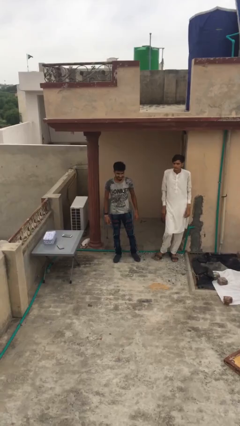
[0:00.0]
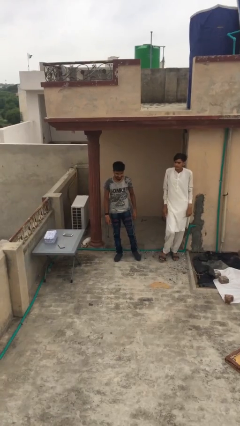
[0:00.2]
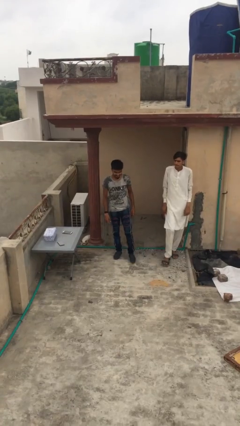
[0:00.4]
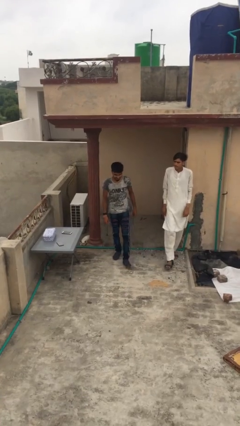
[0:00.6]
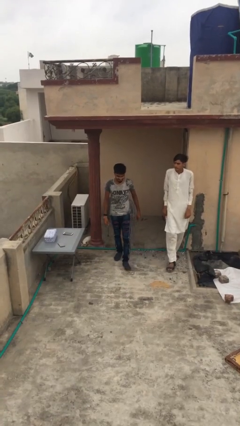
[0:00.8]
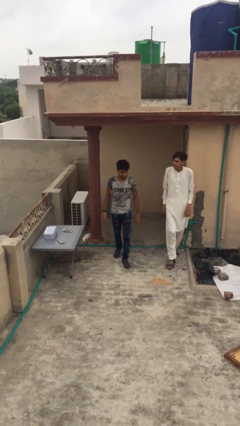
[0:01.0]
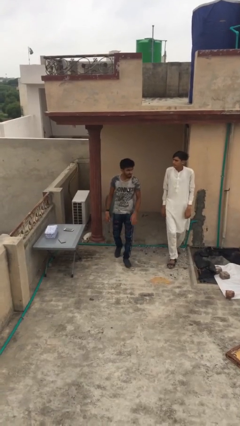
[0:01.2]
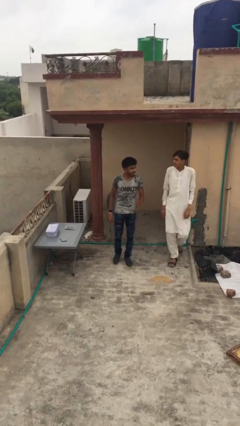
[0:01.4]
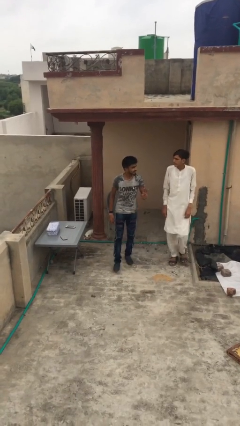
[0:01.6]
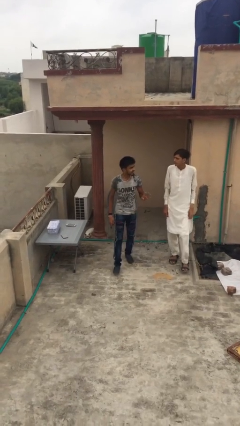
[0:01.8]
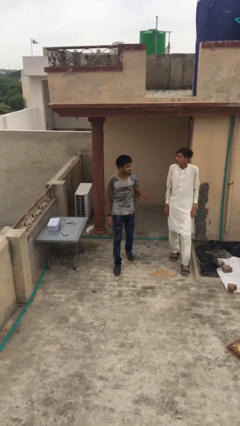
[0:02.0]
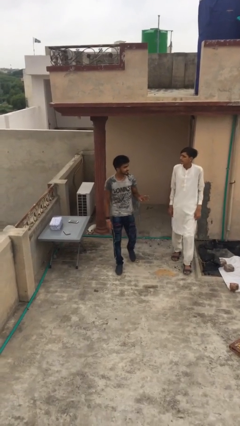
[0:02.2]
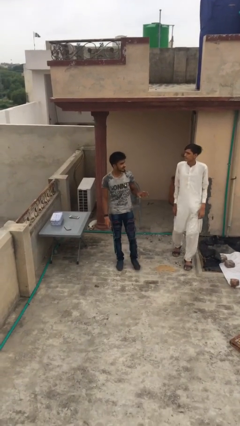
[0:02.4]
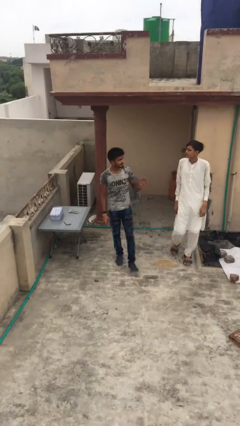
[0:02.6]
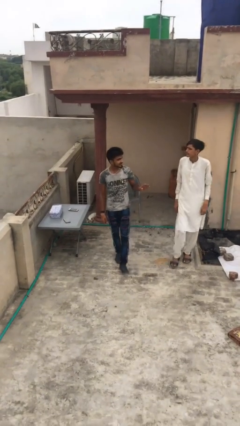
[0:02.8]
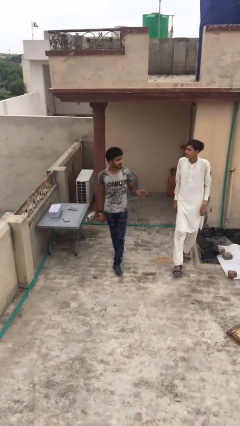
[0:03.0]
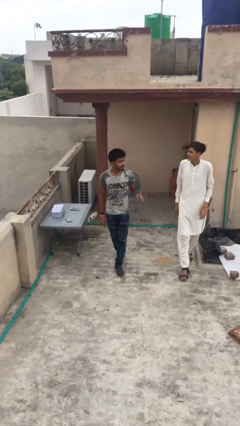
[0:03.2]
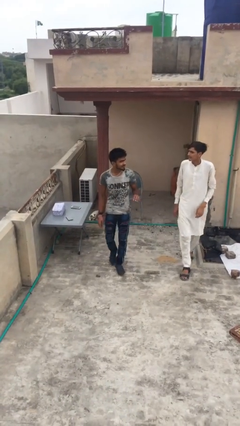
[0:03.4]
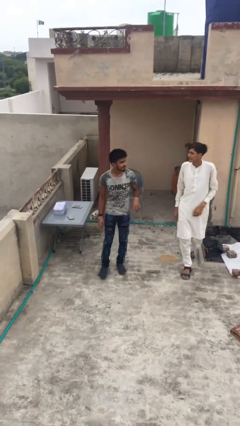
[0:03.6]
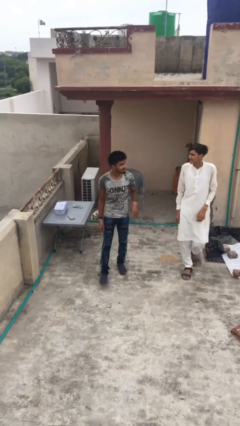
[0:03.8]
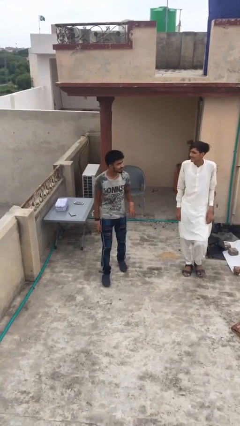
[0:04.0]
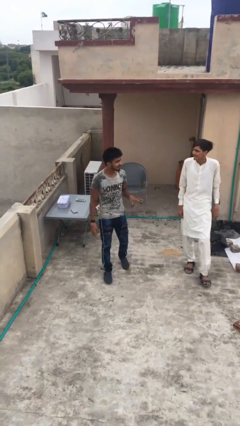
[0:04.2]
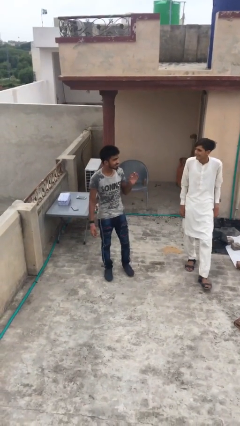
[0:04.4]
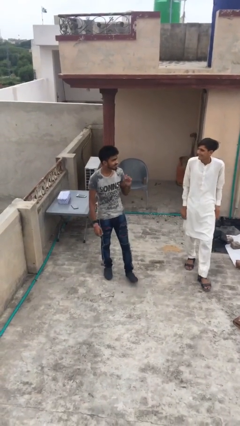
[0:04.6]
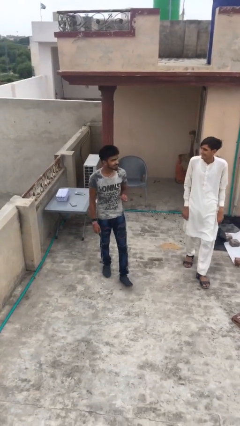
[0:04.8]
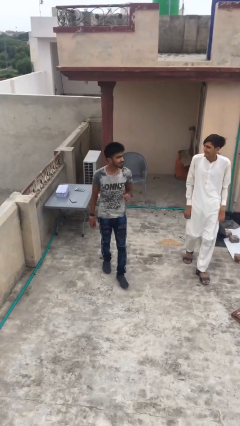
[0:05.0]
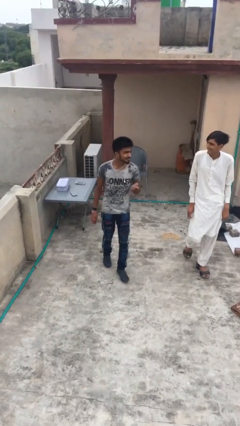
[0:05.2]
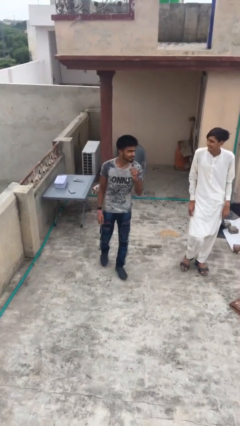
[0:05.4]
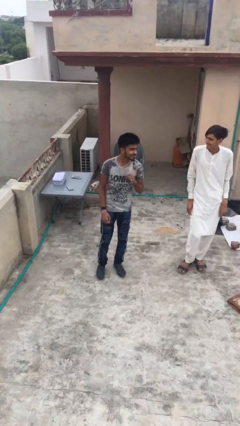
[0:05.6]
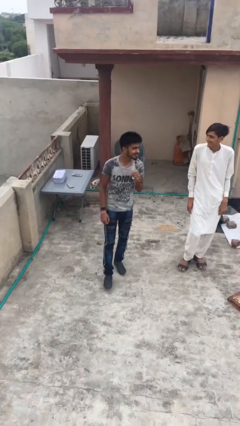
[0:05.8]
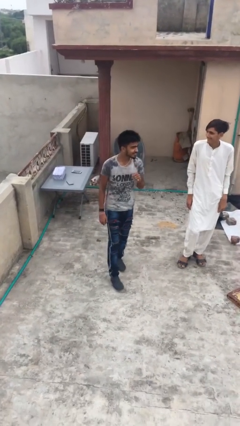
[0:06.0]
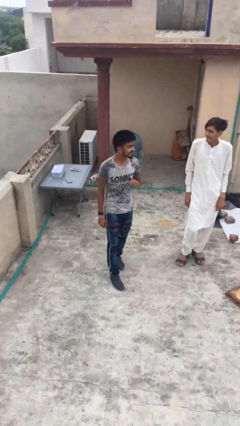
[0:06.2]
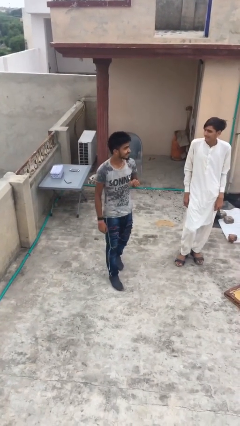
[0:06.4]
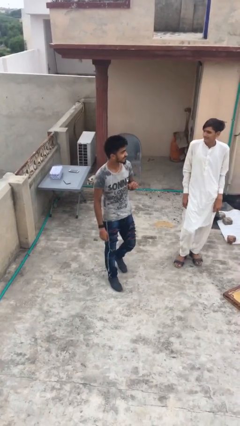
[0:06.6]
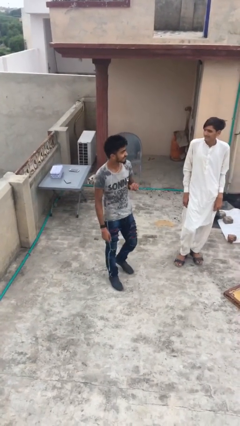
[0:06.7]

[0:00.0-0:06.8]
person talks to person

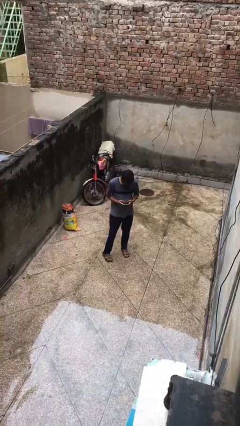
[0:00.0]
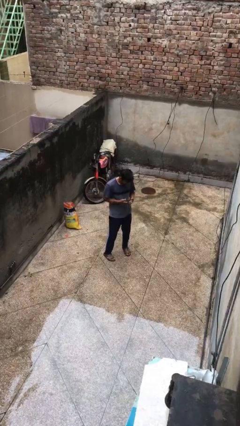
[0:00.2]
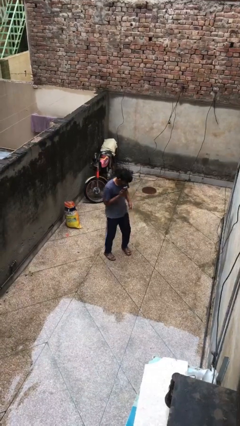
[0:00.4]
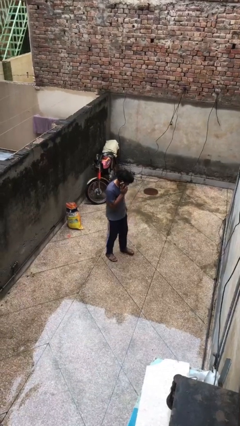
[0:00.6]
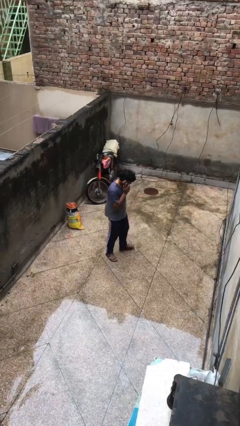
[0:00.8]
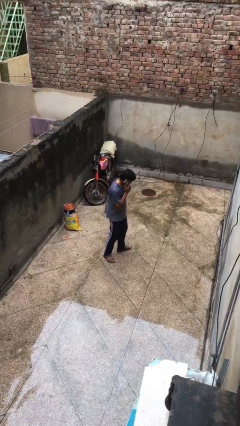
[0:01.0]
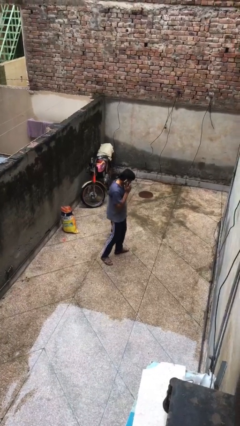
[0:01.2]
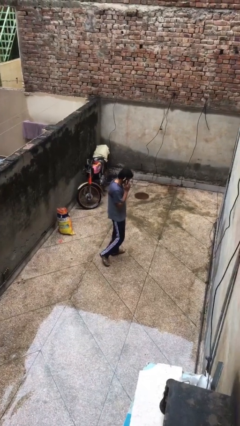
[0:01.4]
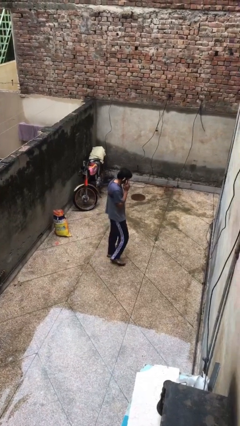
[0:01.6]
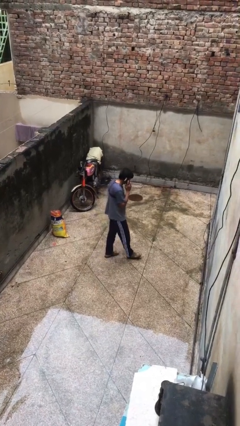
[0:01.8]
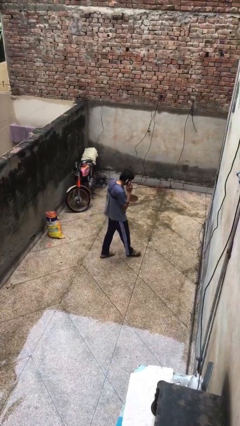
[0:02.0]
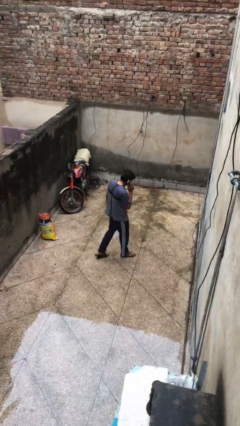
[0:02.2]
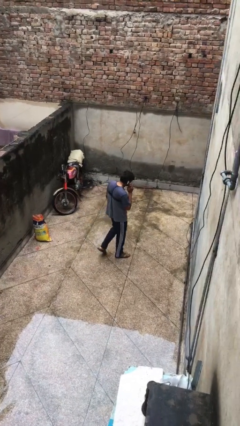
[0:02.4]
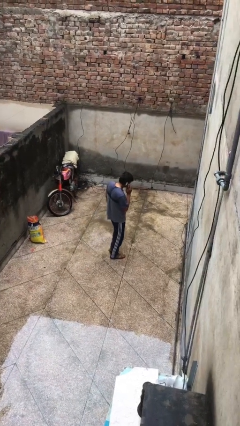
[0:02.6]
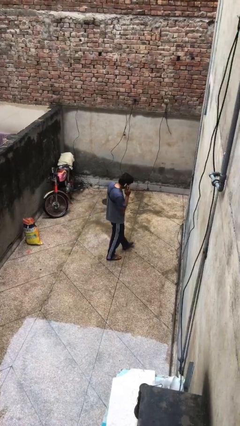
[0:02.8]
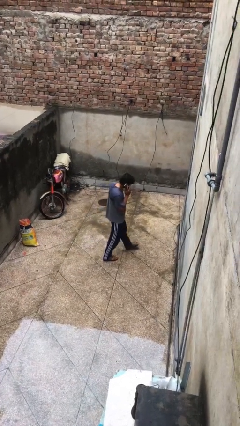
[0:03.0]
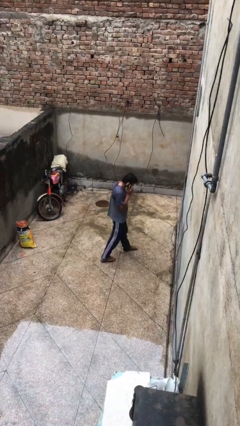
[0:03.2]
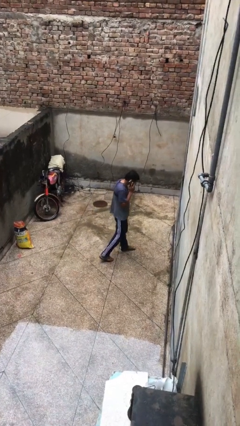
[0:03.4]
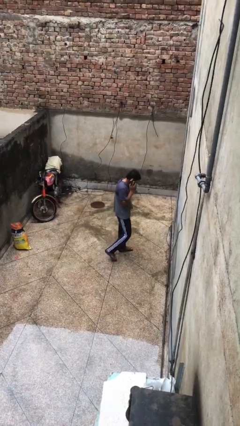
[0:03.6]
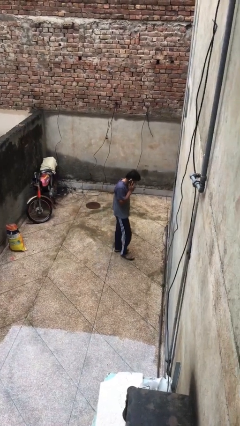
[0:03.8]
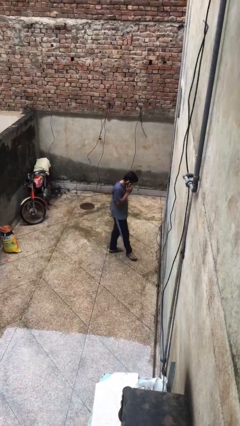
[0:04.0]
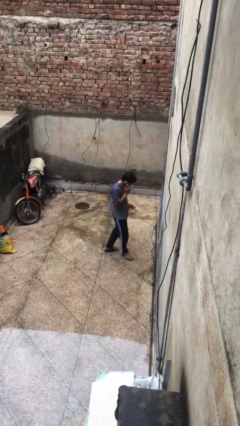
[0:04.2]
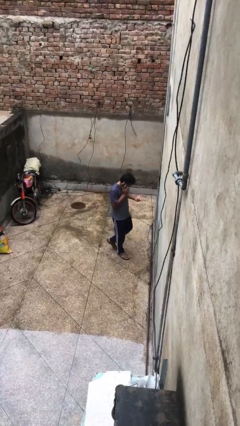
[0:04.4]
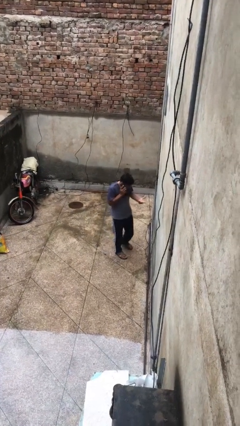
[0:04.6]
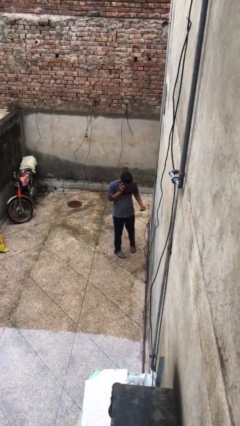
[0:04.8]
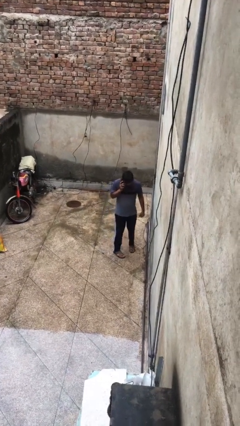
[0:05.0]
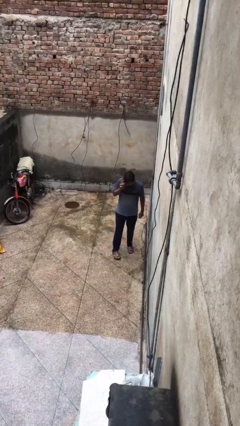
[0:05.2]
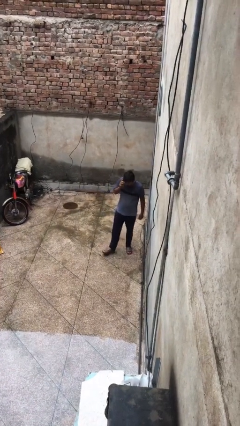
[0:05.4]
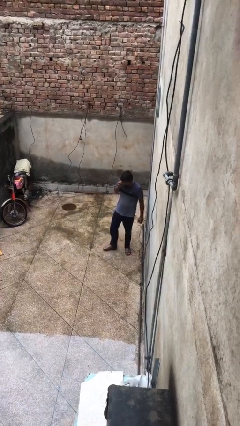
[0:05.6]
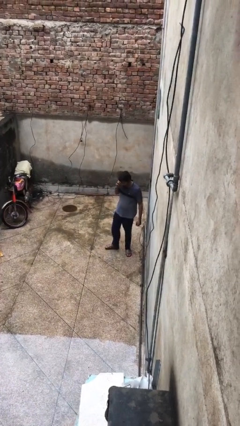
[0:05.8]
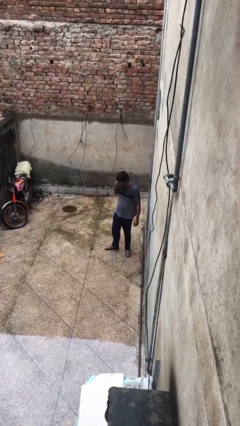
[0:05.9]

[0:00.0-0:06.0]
person talks on phone

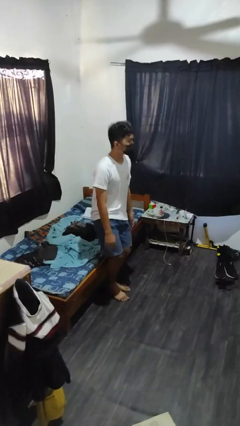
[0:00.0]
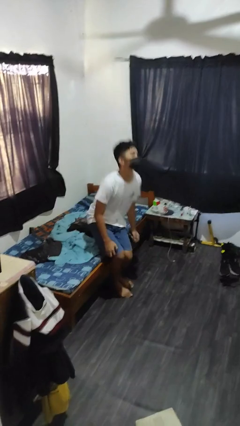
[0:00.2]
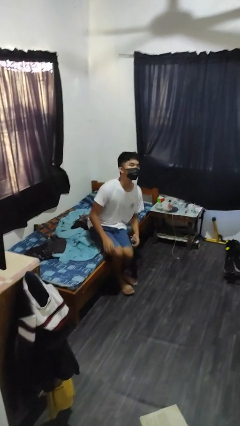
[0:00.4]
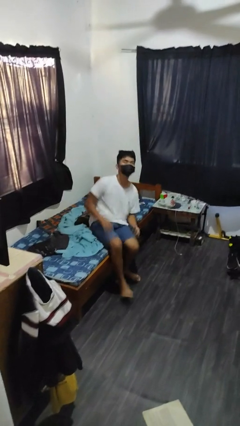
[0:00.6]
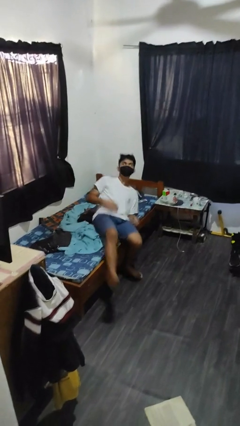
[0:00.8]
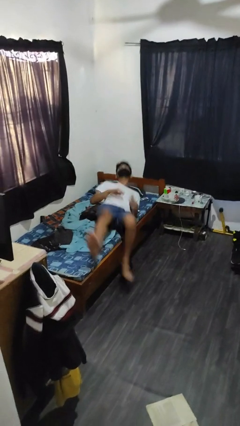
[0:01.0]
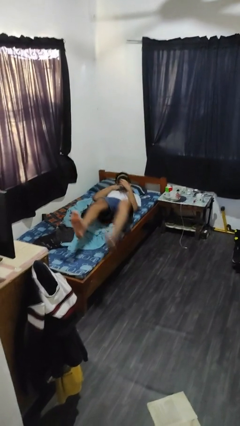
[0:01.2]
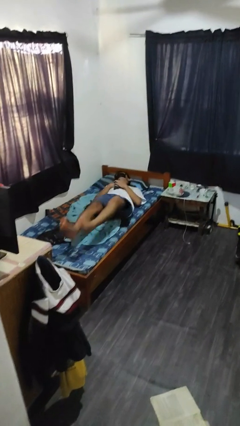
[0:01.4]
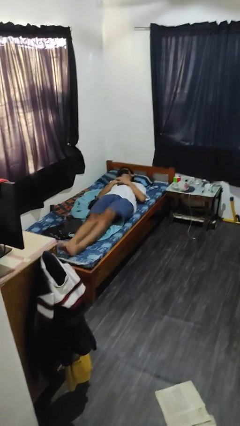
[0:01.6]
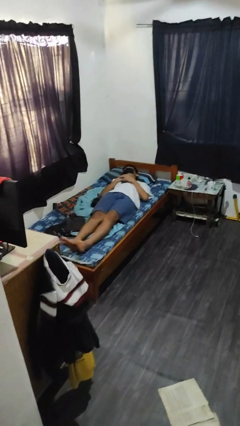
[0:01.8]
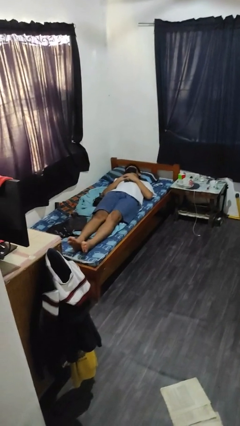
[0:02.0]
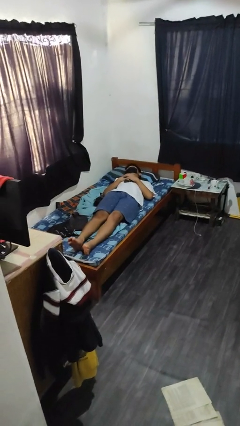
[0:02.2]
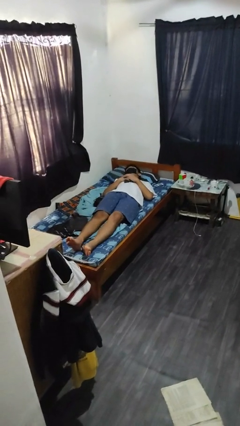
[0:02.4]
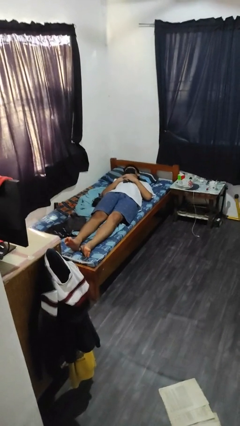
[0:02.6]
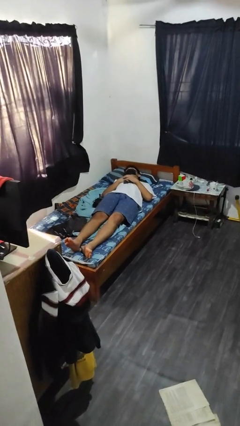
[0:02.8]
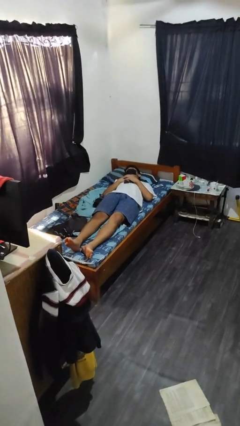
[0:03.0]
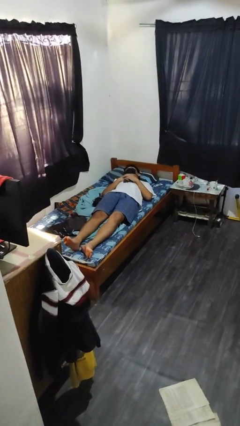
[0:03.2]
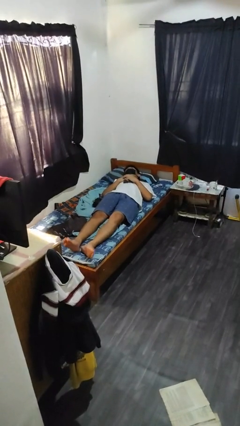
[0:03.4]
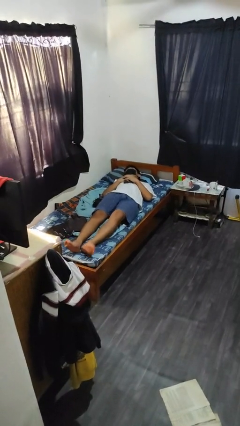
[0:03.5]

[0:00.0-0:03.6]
person lies down on bed

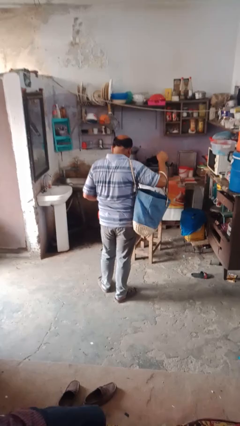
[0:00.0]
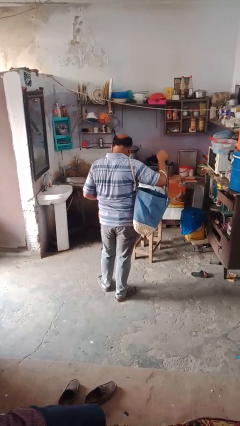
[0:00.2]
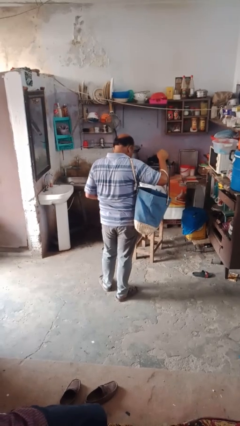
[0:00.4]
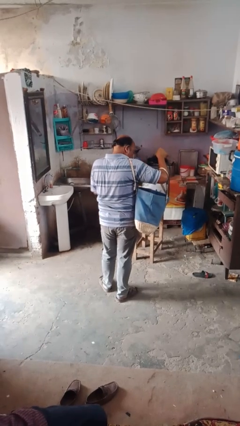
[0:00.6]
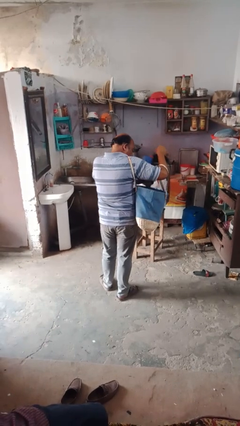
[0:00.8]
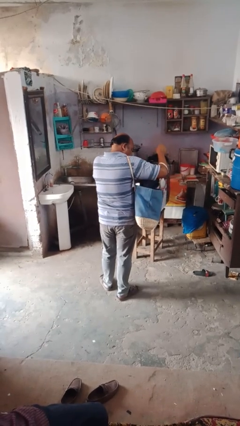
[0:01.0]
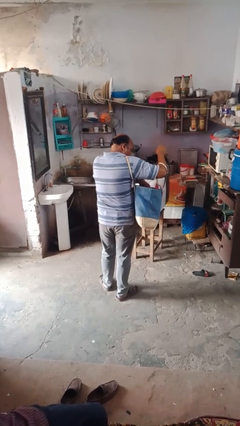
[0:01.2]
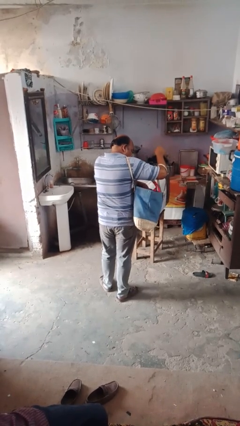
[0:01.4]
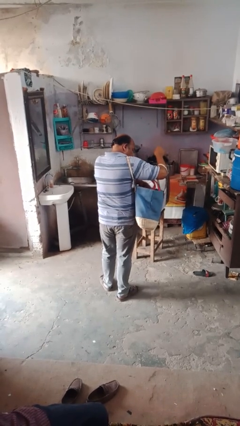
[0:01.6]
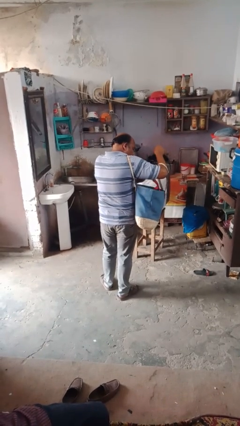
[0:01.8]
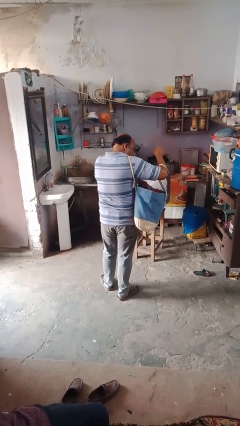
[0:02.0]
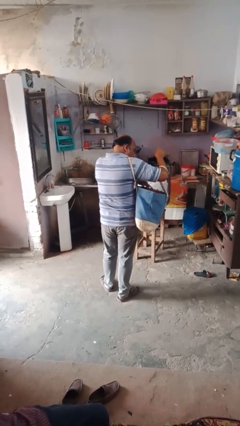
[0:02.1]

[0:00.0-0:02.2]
person puts object into bag
